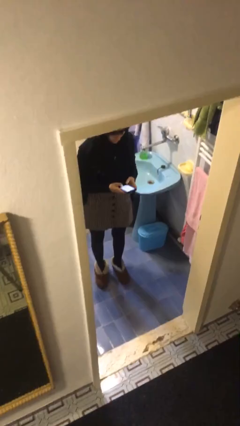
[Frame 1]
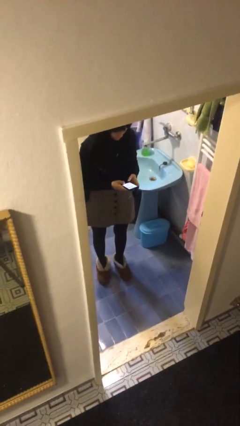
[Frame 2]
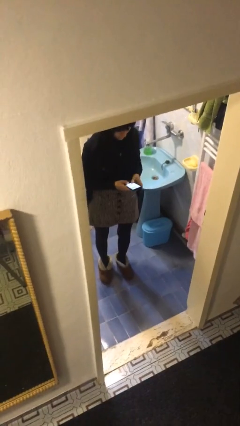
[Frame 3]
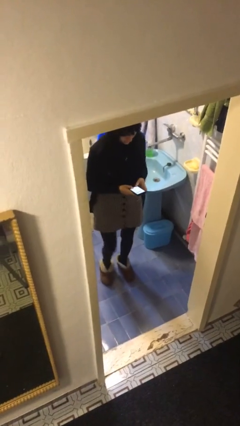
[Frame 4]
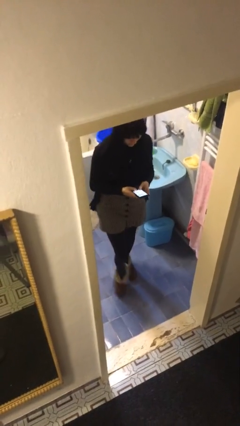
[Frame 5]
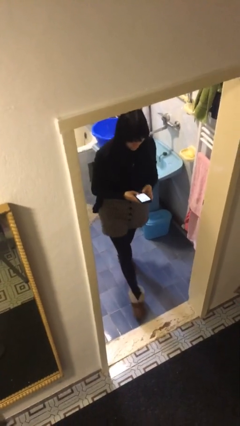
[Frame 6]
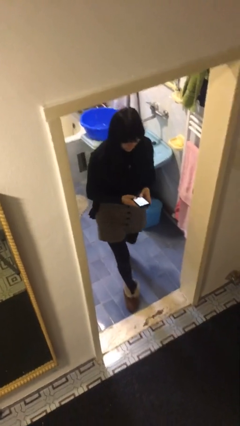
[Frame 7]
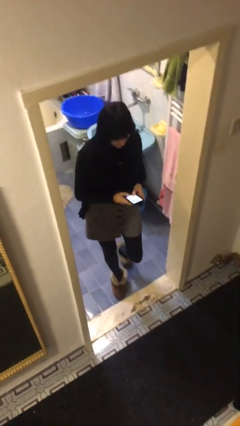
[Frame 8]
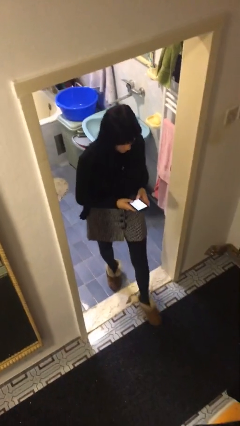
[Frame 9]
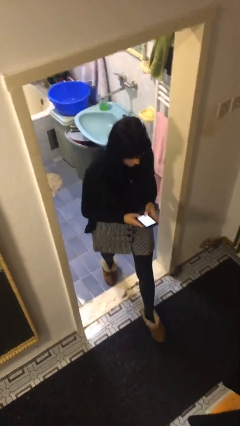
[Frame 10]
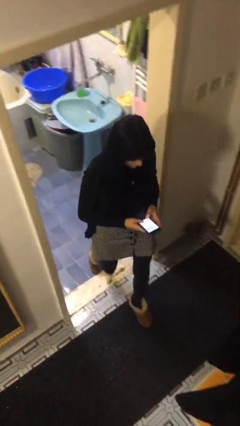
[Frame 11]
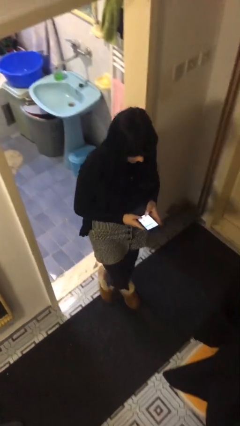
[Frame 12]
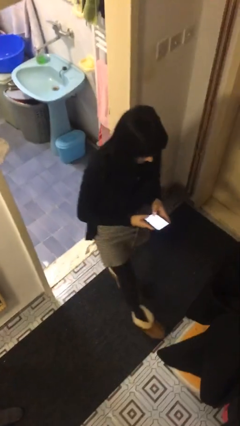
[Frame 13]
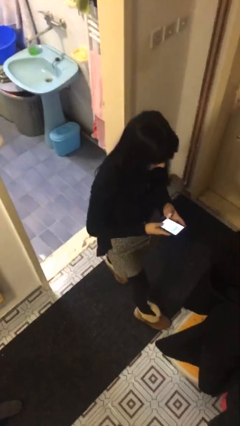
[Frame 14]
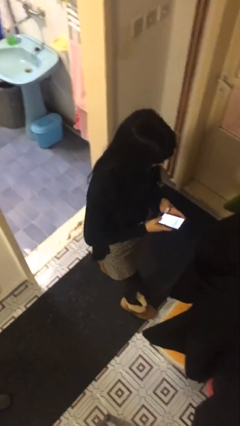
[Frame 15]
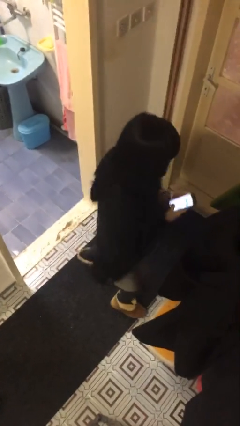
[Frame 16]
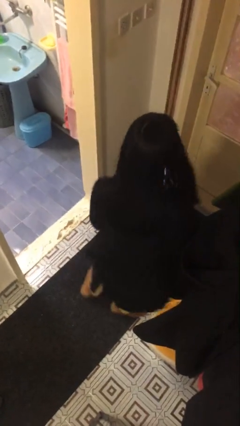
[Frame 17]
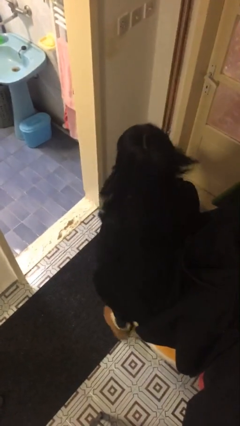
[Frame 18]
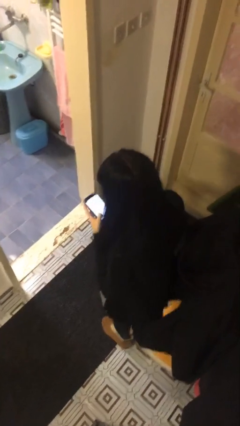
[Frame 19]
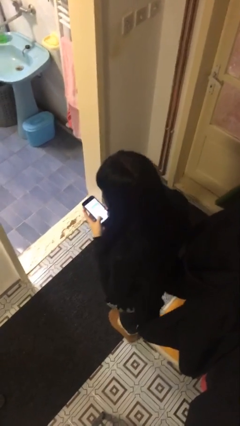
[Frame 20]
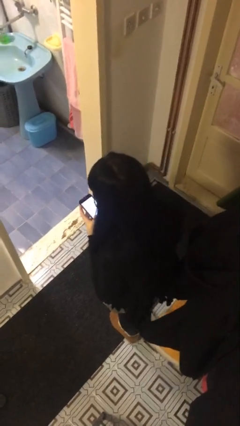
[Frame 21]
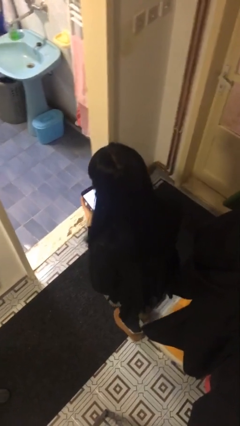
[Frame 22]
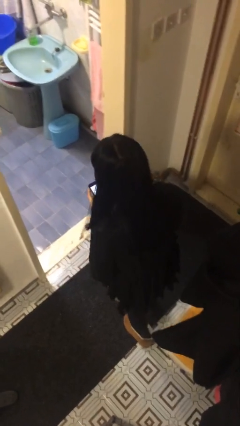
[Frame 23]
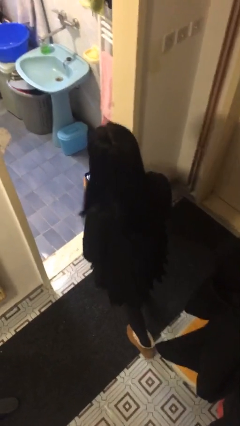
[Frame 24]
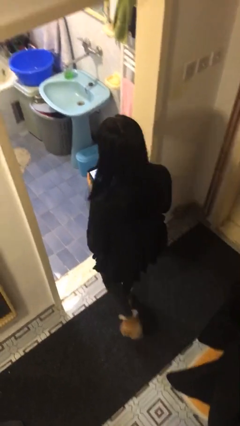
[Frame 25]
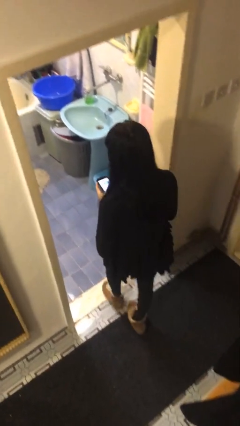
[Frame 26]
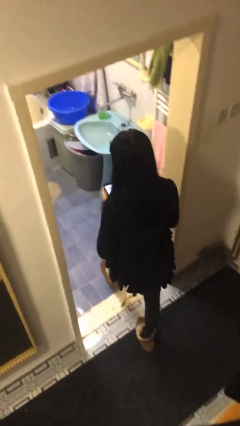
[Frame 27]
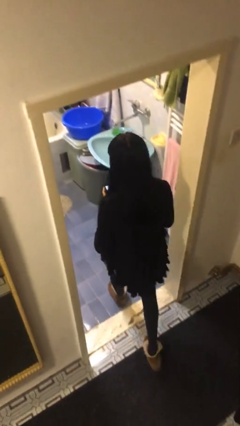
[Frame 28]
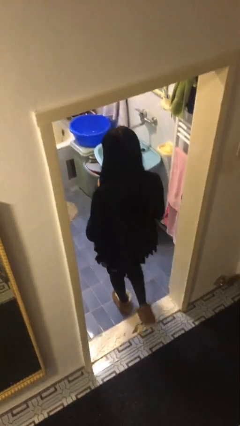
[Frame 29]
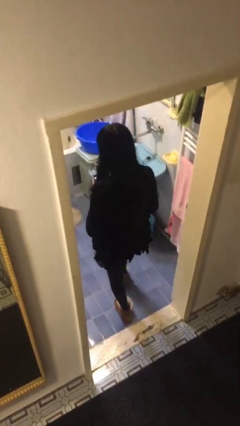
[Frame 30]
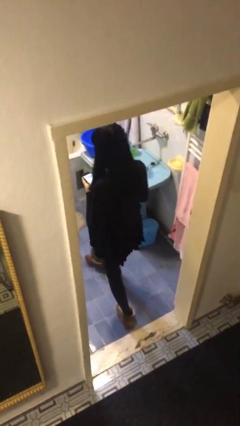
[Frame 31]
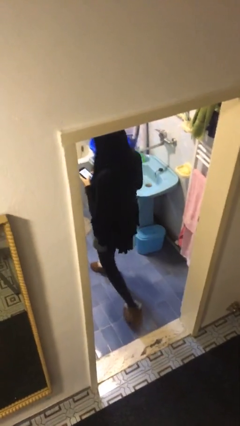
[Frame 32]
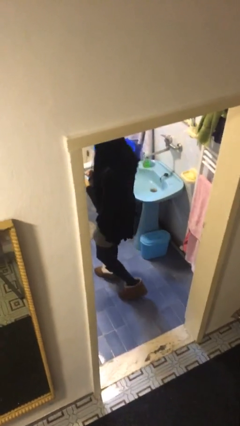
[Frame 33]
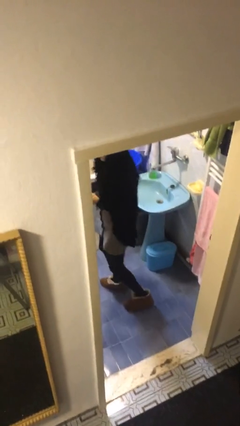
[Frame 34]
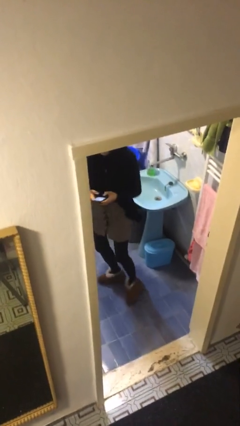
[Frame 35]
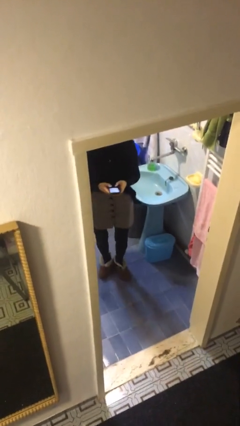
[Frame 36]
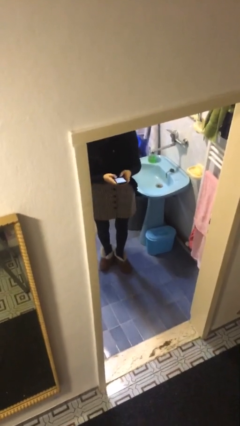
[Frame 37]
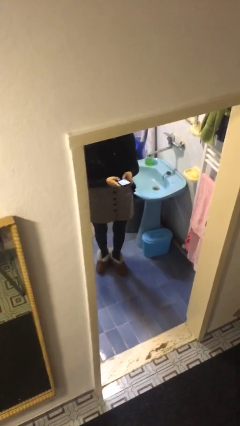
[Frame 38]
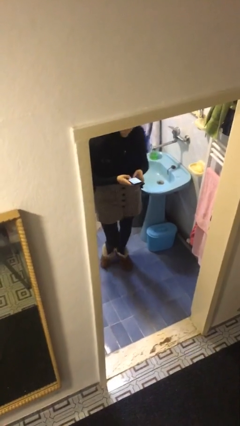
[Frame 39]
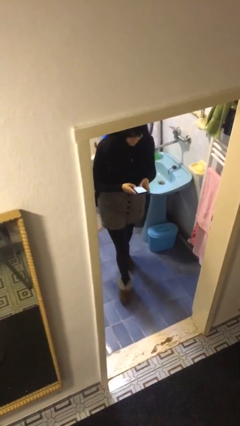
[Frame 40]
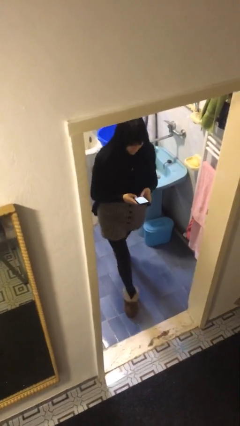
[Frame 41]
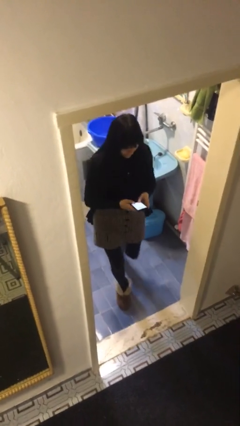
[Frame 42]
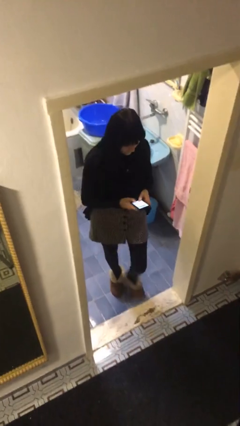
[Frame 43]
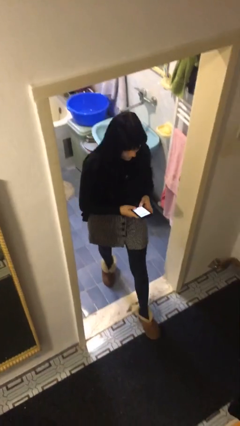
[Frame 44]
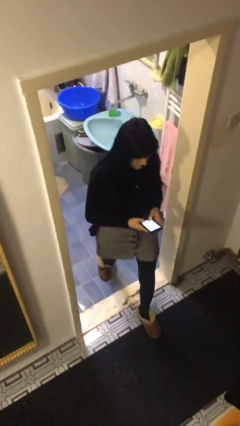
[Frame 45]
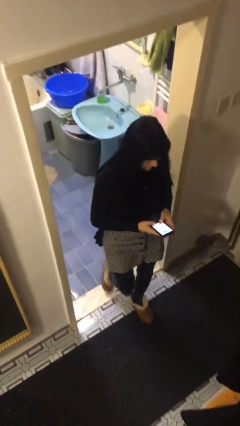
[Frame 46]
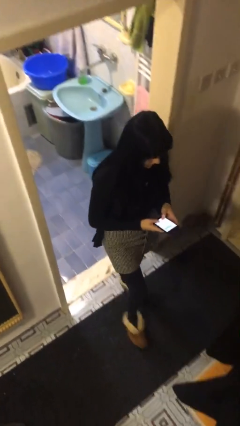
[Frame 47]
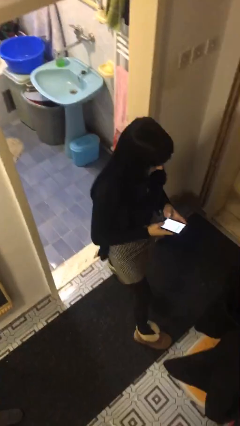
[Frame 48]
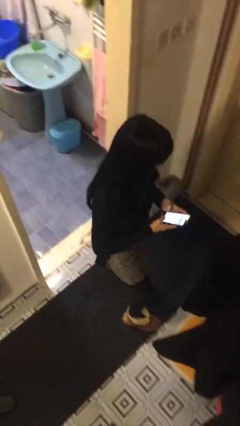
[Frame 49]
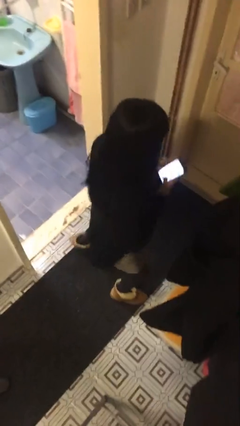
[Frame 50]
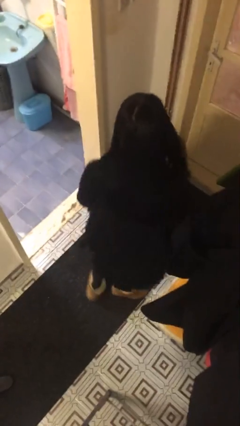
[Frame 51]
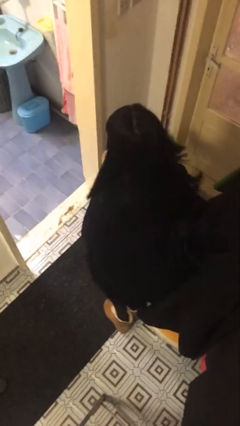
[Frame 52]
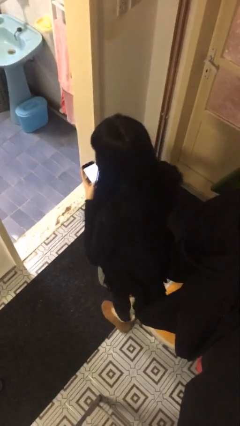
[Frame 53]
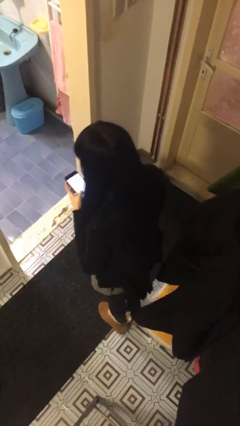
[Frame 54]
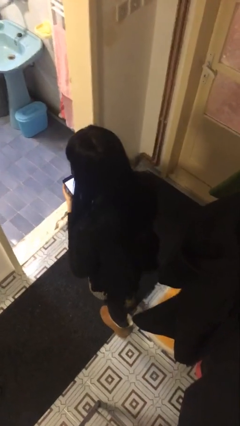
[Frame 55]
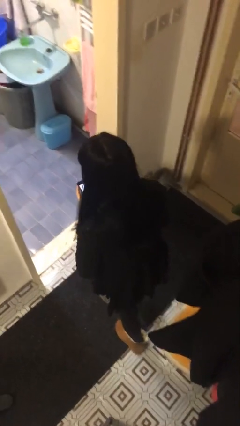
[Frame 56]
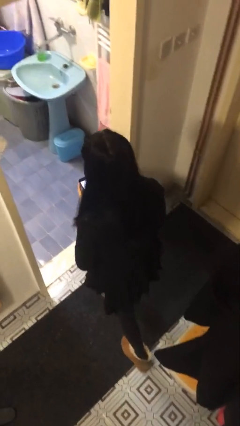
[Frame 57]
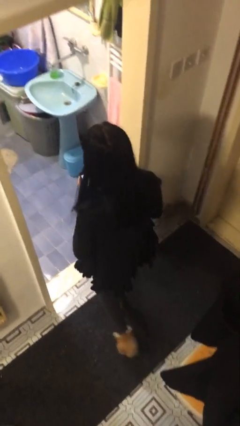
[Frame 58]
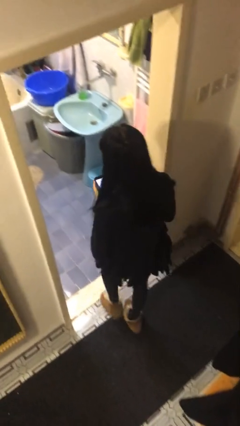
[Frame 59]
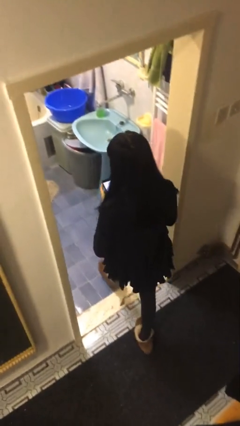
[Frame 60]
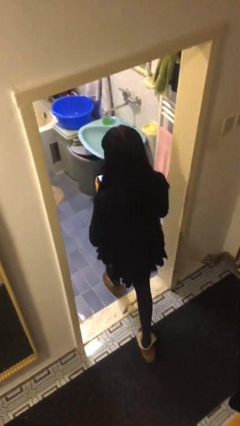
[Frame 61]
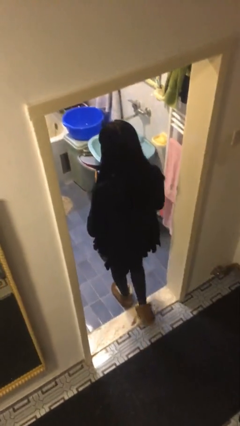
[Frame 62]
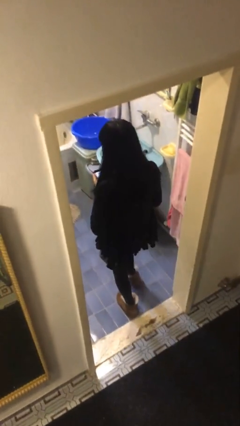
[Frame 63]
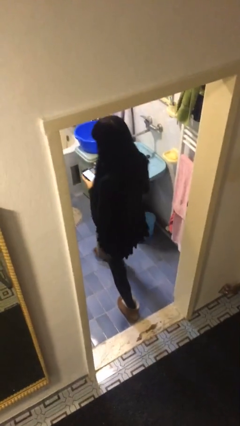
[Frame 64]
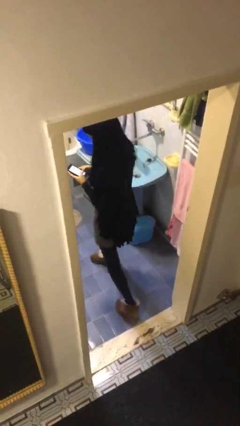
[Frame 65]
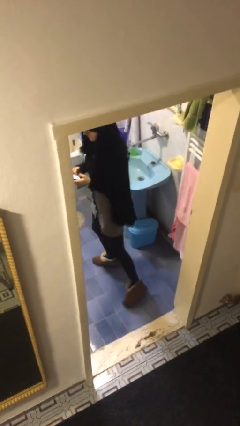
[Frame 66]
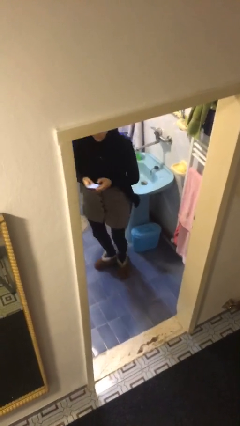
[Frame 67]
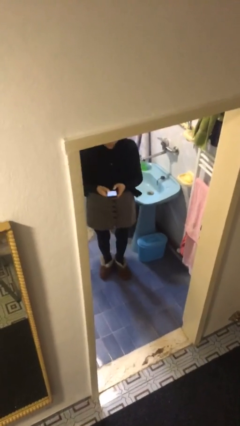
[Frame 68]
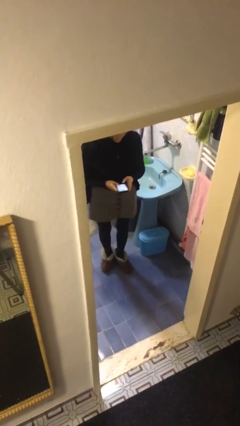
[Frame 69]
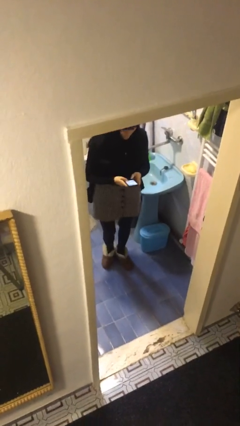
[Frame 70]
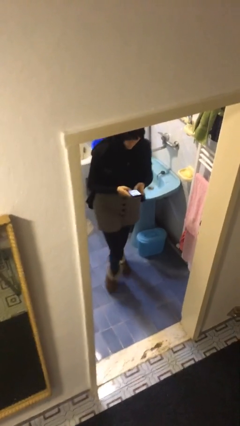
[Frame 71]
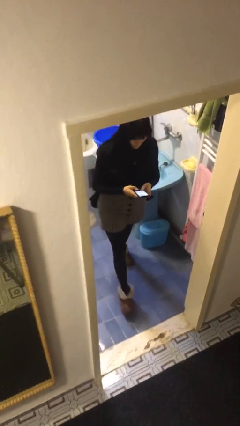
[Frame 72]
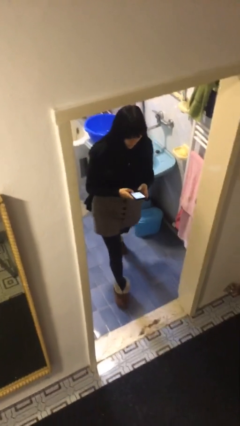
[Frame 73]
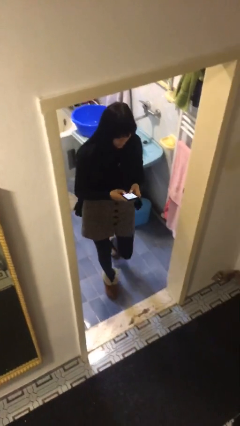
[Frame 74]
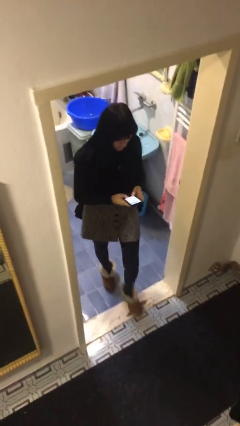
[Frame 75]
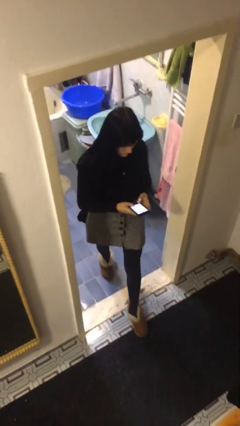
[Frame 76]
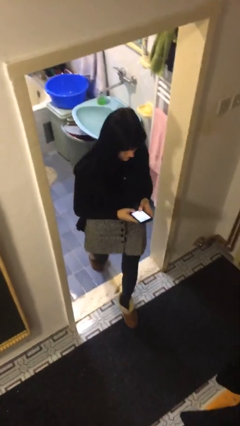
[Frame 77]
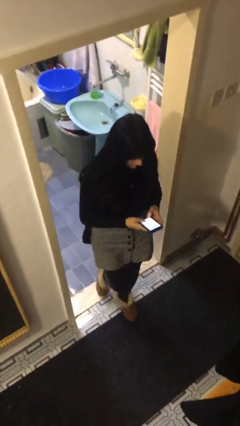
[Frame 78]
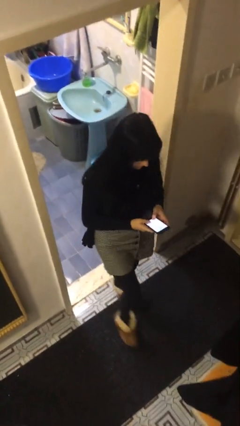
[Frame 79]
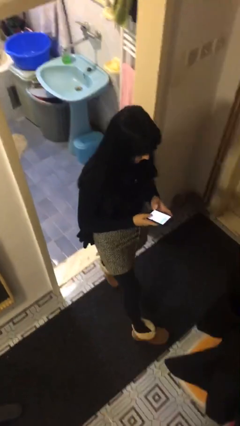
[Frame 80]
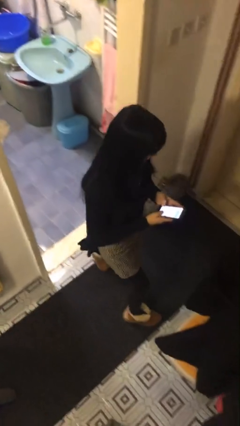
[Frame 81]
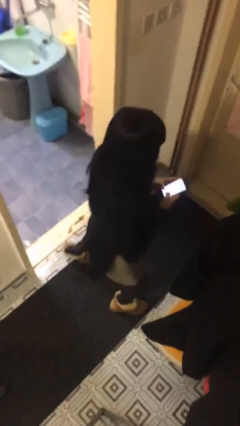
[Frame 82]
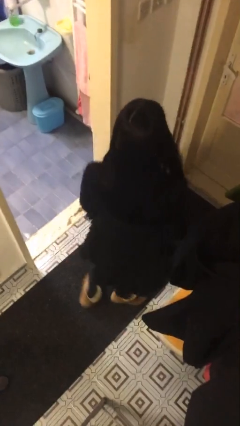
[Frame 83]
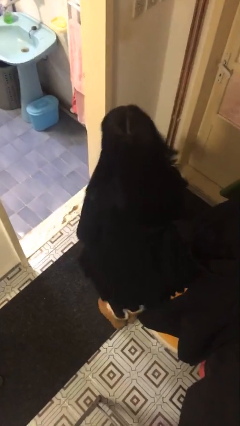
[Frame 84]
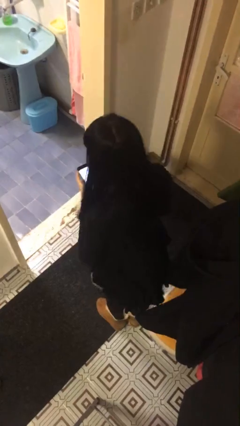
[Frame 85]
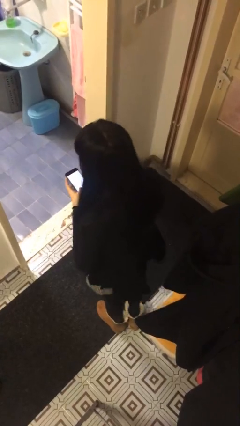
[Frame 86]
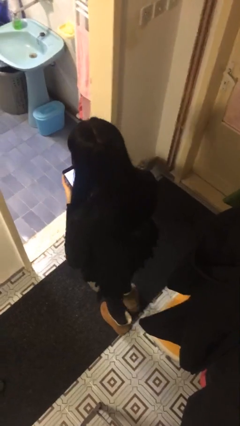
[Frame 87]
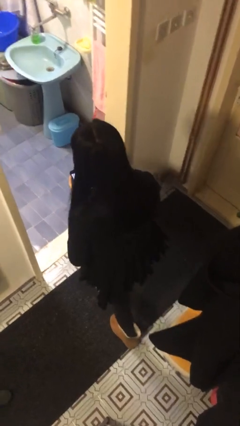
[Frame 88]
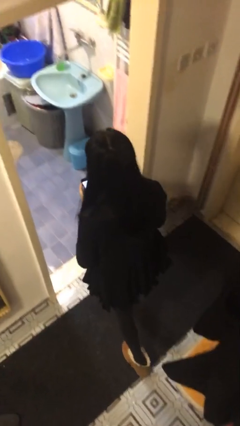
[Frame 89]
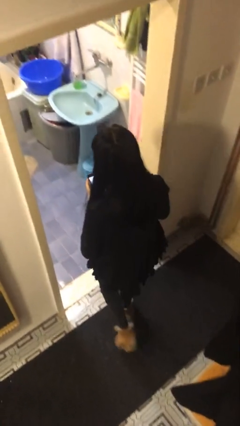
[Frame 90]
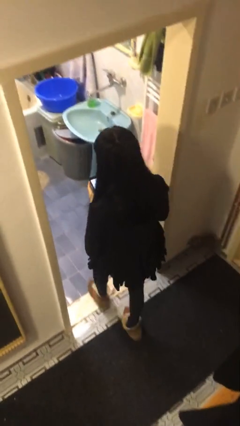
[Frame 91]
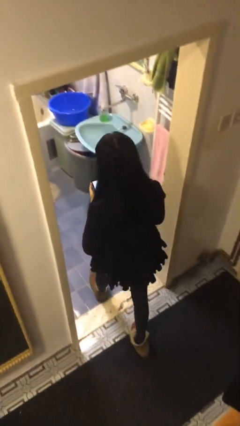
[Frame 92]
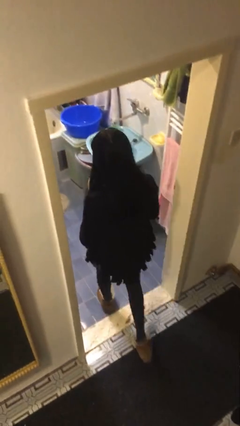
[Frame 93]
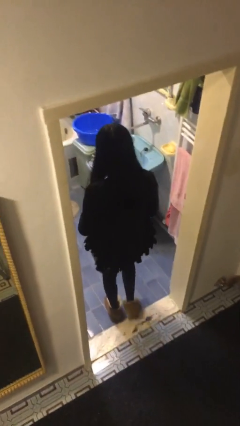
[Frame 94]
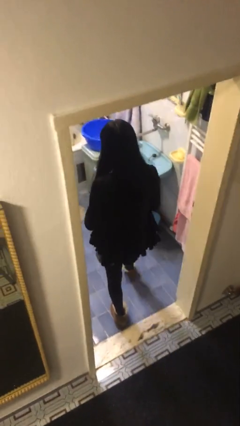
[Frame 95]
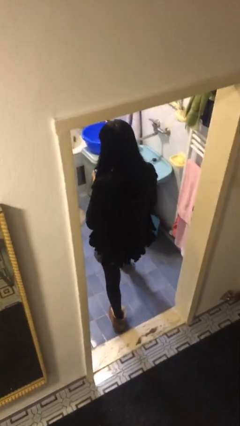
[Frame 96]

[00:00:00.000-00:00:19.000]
person texts on phone
